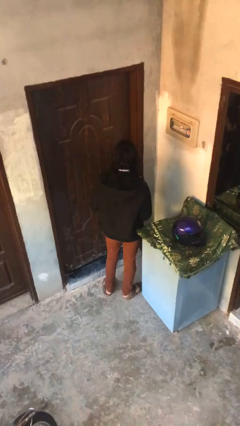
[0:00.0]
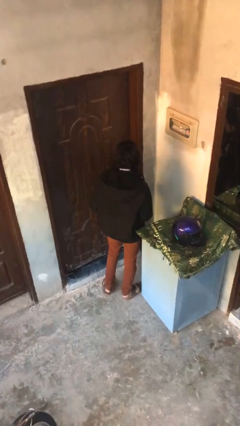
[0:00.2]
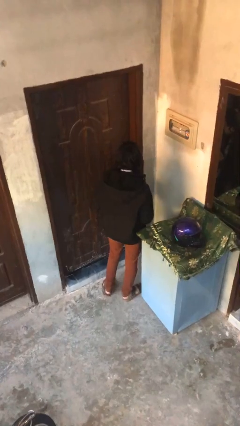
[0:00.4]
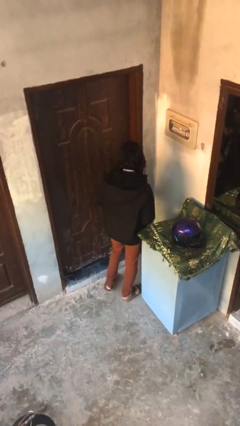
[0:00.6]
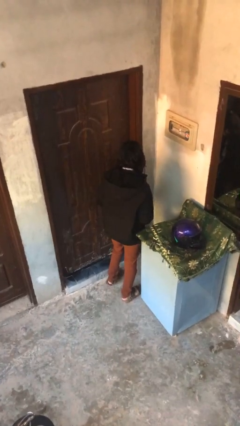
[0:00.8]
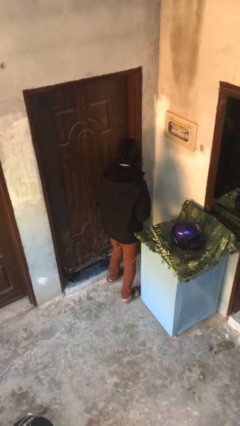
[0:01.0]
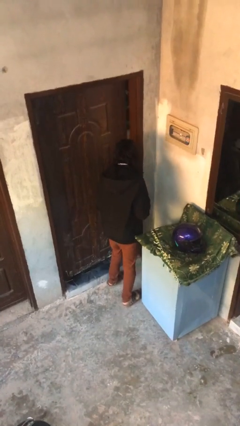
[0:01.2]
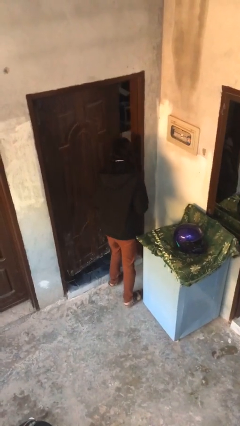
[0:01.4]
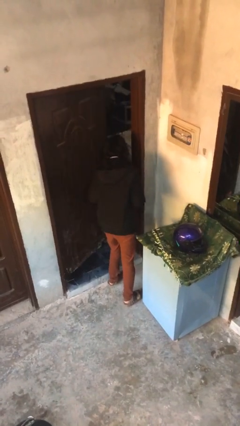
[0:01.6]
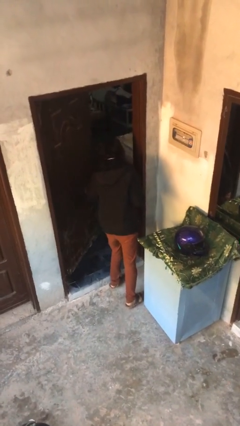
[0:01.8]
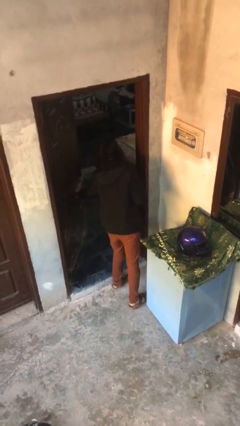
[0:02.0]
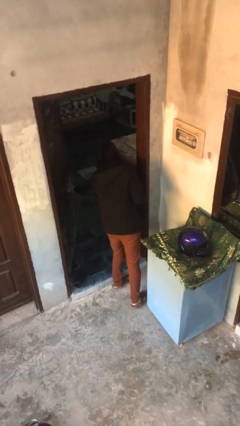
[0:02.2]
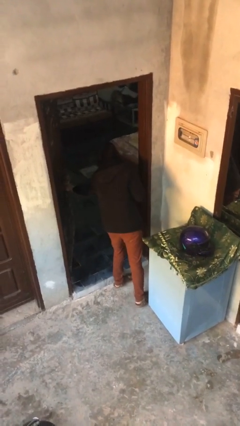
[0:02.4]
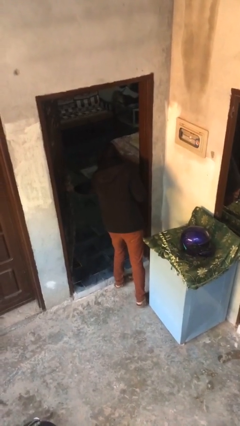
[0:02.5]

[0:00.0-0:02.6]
person opens facility door

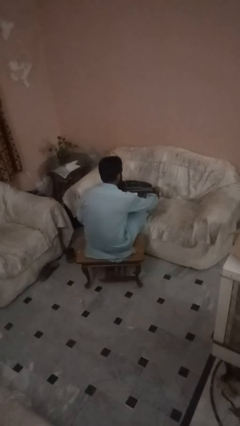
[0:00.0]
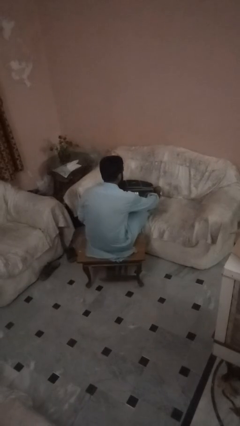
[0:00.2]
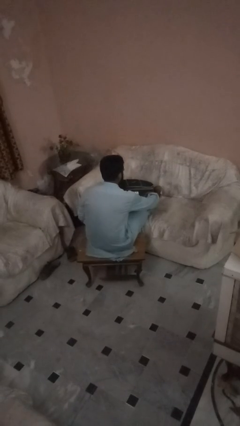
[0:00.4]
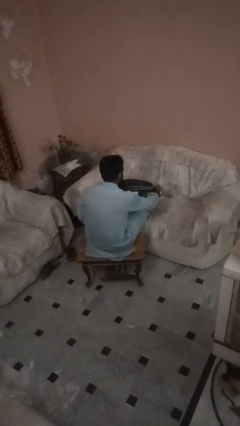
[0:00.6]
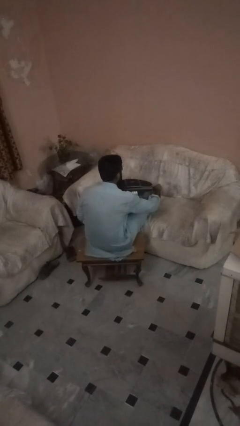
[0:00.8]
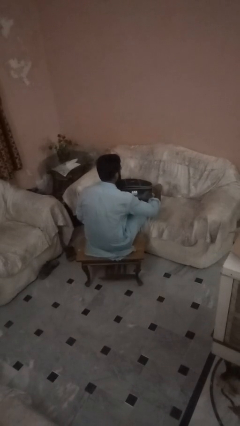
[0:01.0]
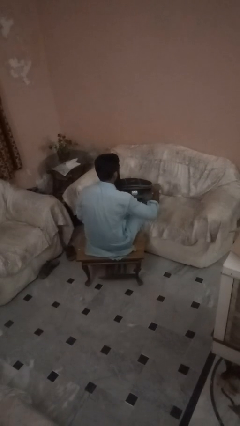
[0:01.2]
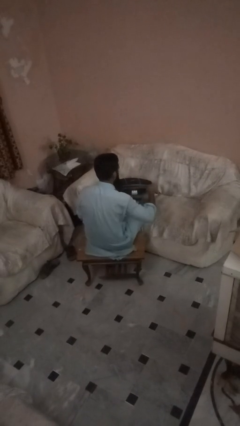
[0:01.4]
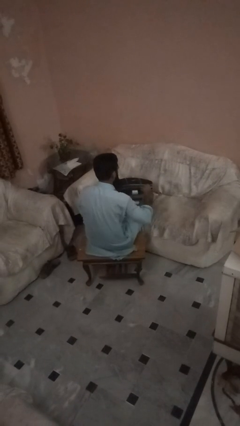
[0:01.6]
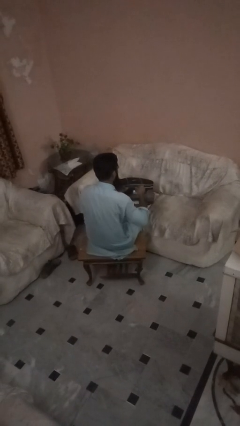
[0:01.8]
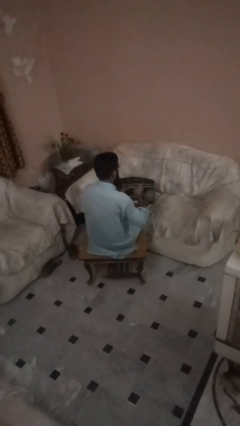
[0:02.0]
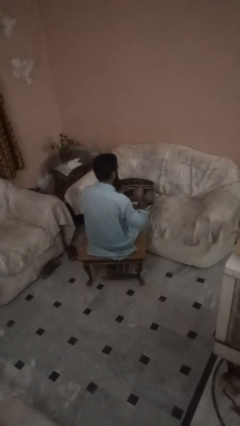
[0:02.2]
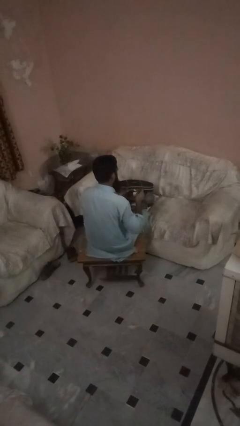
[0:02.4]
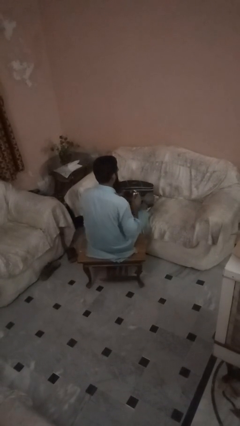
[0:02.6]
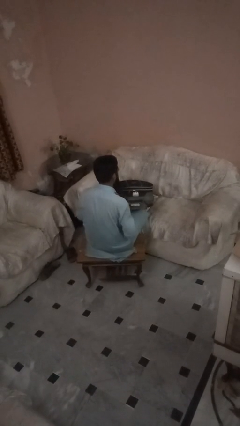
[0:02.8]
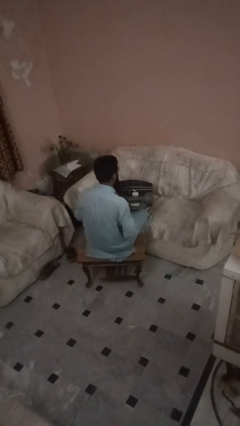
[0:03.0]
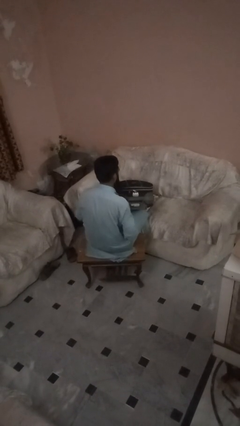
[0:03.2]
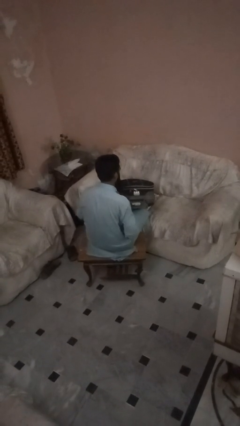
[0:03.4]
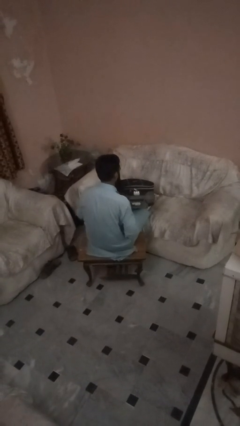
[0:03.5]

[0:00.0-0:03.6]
person closes suitcase

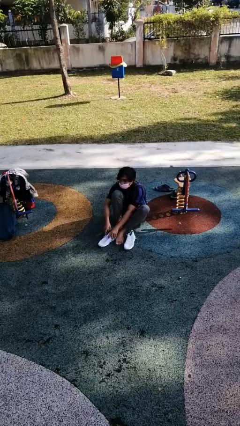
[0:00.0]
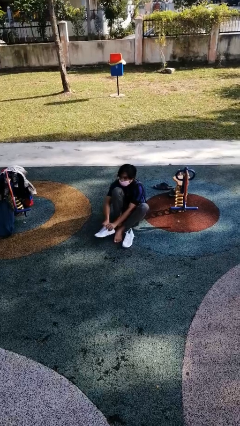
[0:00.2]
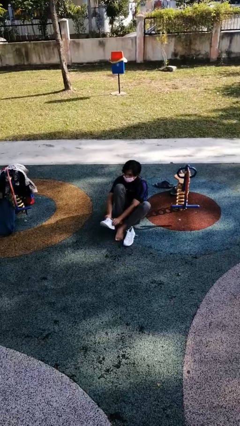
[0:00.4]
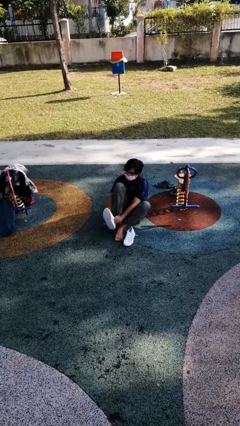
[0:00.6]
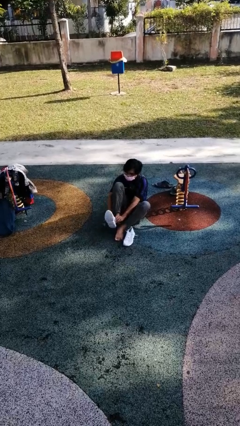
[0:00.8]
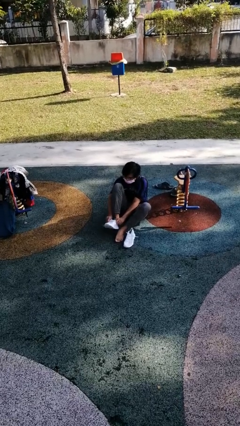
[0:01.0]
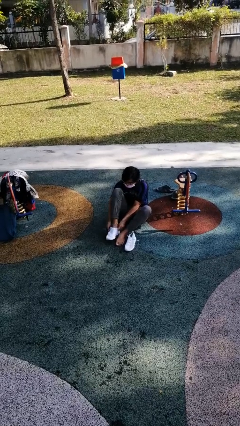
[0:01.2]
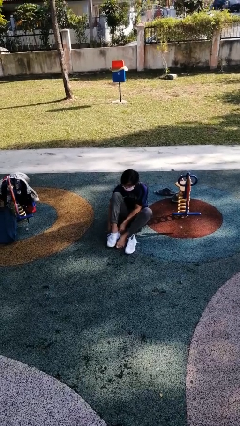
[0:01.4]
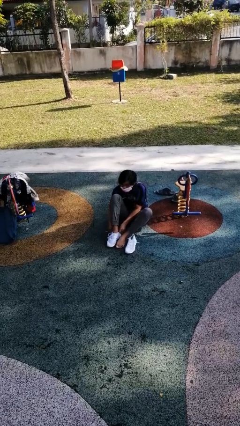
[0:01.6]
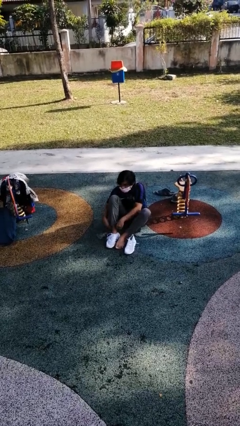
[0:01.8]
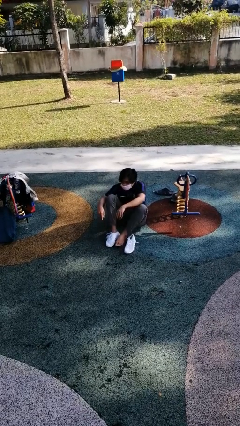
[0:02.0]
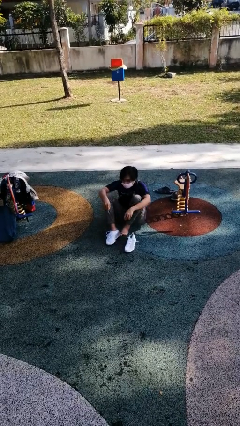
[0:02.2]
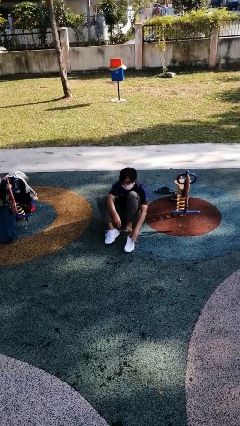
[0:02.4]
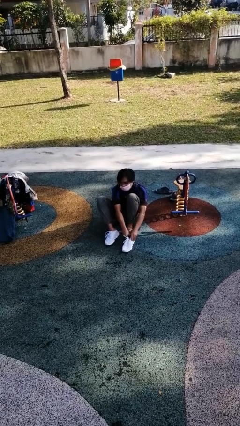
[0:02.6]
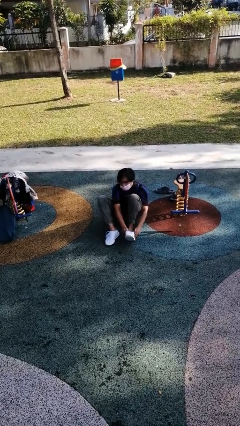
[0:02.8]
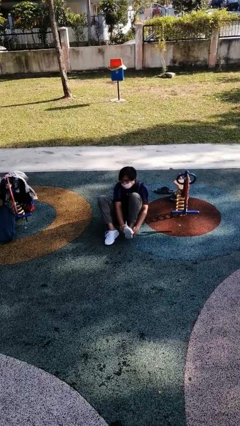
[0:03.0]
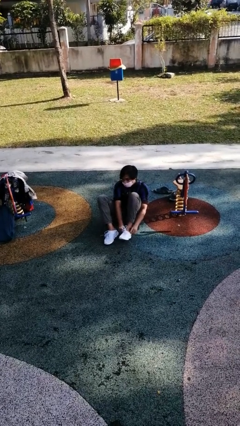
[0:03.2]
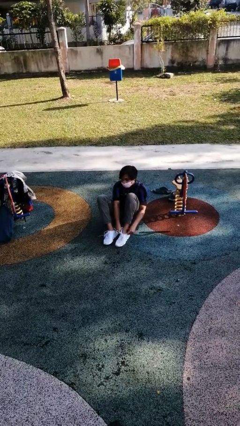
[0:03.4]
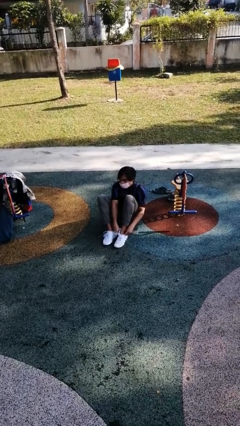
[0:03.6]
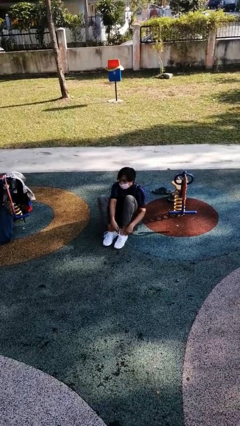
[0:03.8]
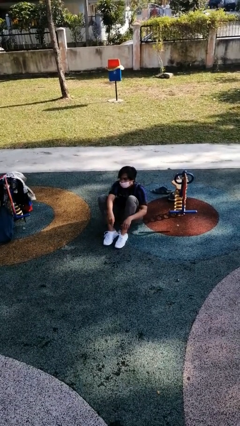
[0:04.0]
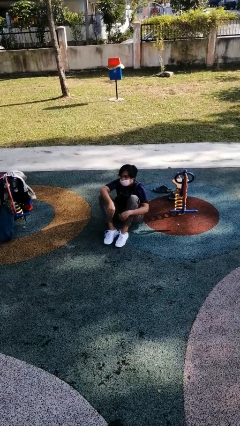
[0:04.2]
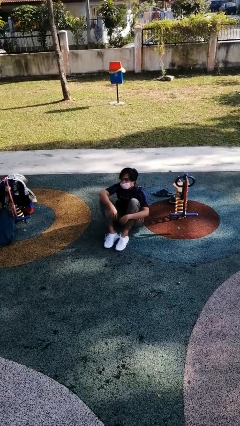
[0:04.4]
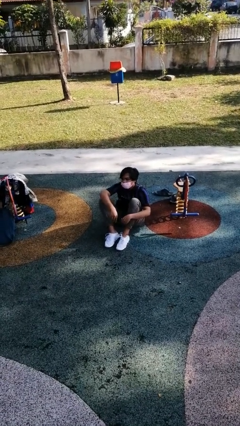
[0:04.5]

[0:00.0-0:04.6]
person puts on shoes

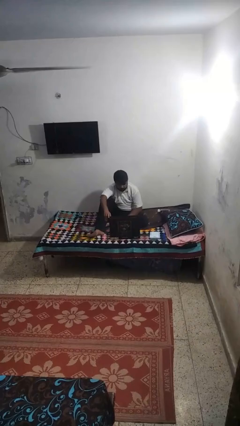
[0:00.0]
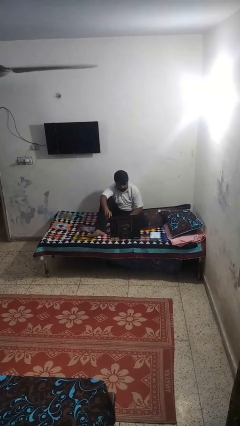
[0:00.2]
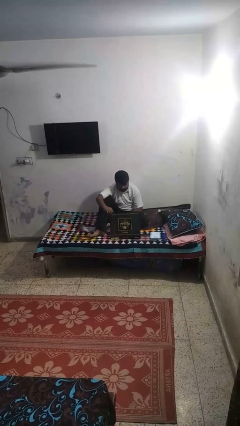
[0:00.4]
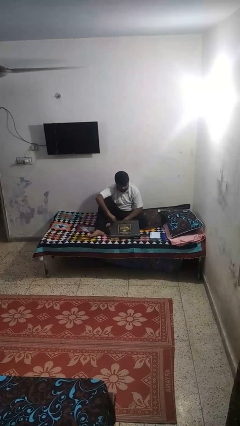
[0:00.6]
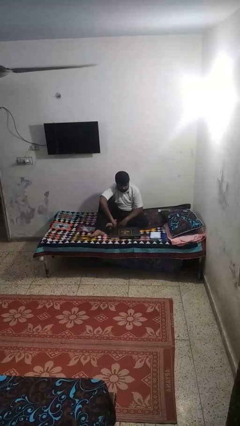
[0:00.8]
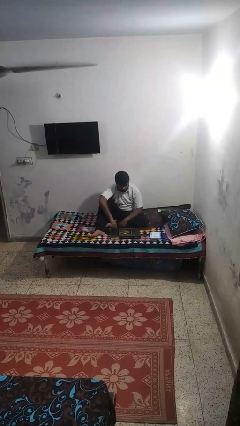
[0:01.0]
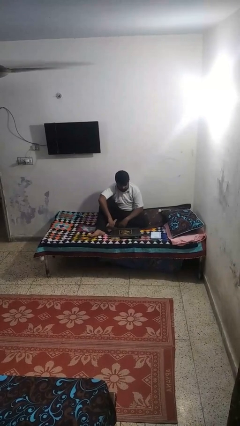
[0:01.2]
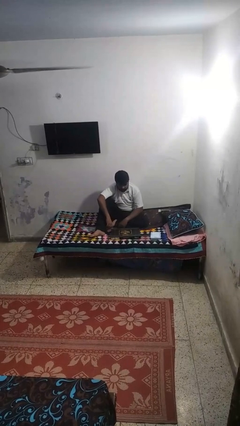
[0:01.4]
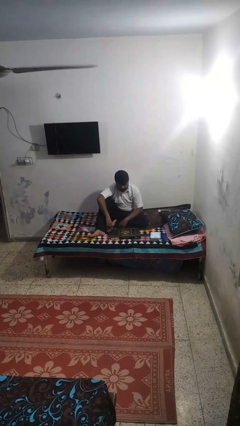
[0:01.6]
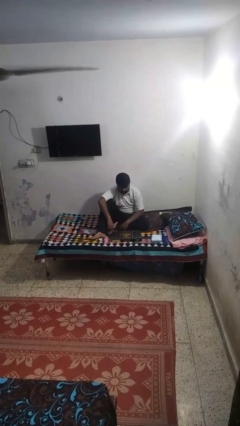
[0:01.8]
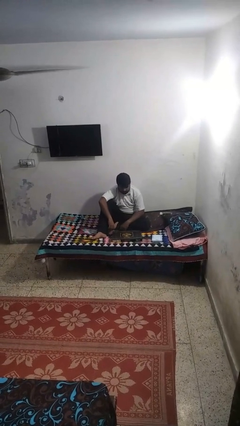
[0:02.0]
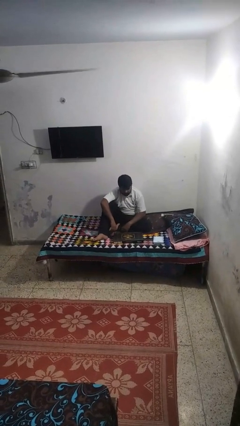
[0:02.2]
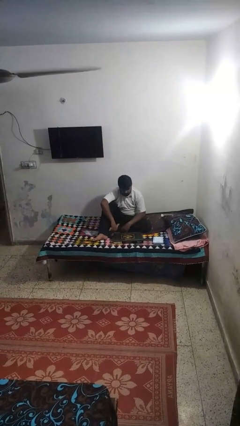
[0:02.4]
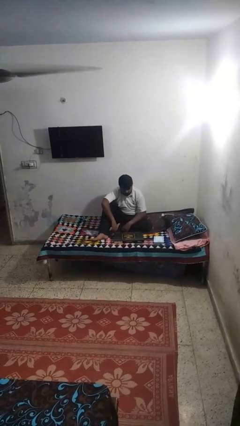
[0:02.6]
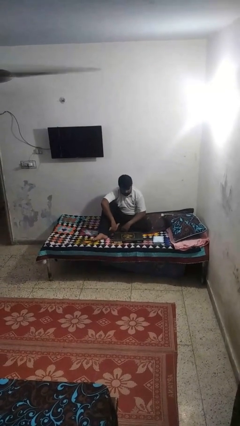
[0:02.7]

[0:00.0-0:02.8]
person closes laptop

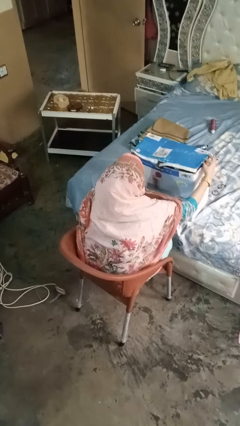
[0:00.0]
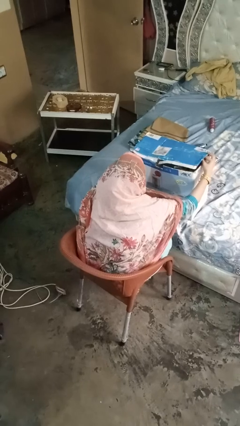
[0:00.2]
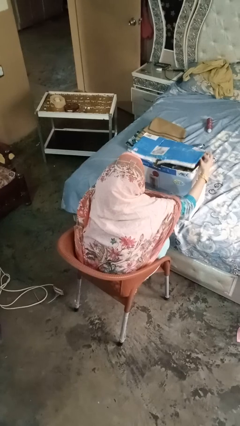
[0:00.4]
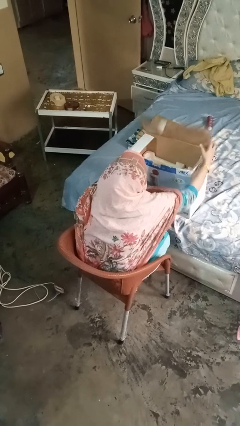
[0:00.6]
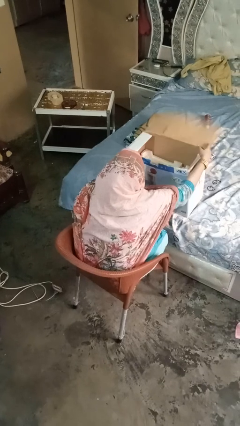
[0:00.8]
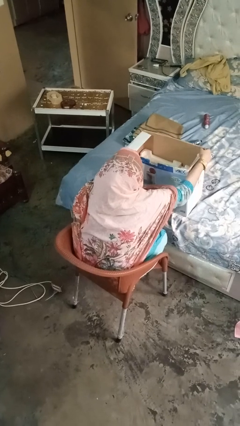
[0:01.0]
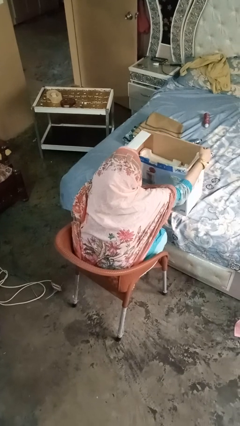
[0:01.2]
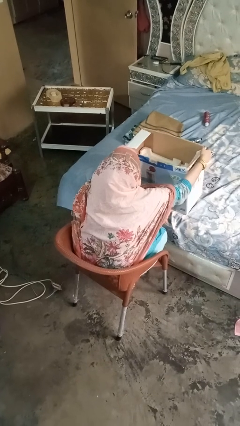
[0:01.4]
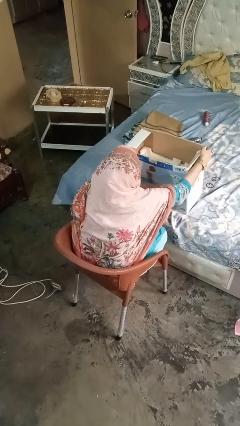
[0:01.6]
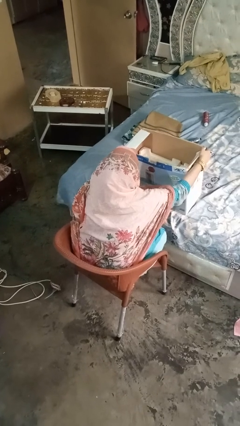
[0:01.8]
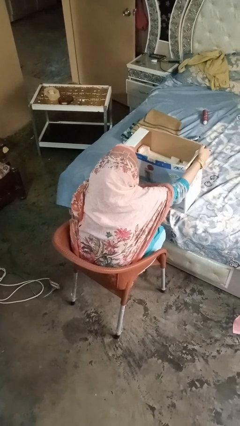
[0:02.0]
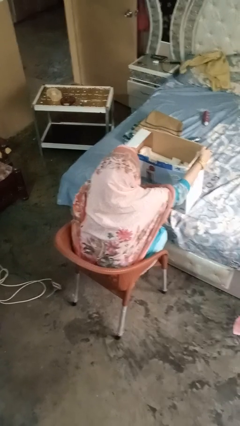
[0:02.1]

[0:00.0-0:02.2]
person opens box

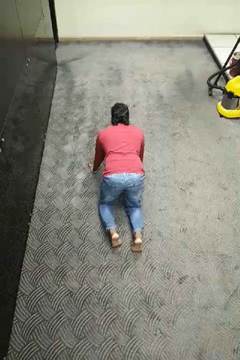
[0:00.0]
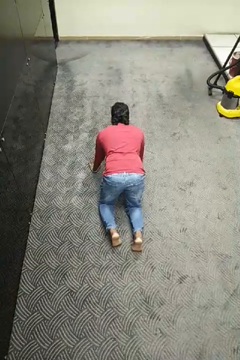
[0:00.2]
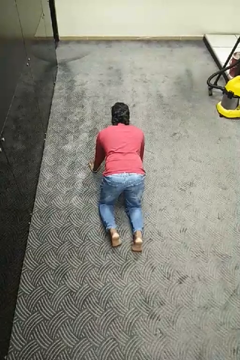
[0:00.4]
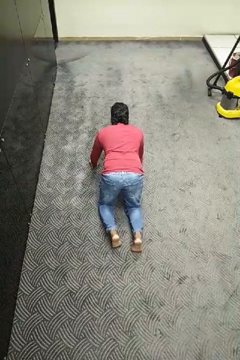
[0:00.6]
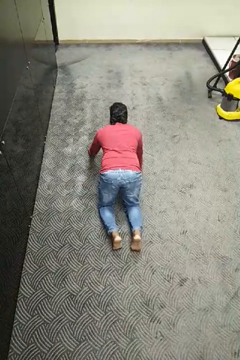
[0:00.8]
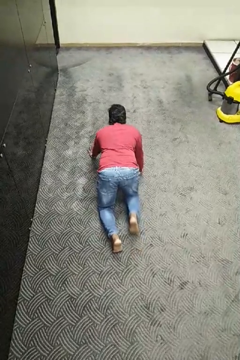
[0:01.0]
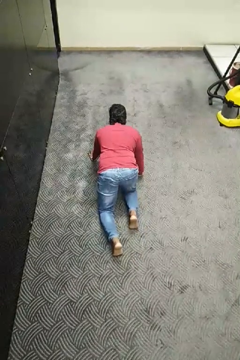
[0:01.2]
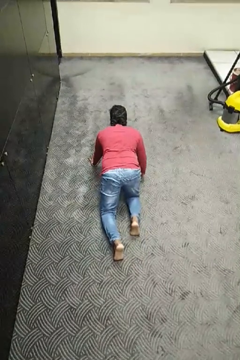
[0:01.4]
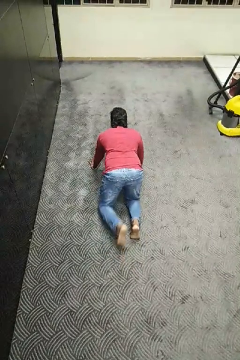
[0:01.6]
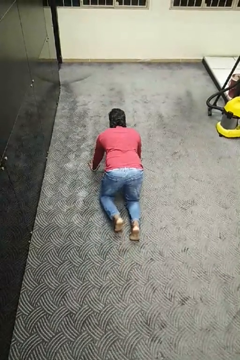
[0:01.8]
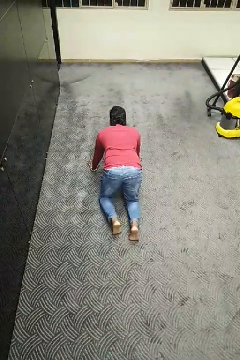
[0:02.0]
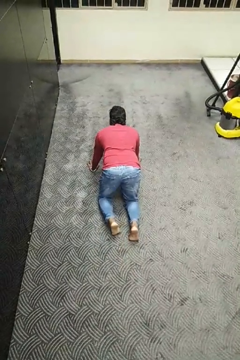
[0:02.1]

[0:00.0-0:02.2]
person crawls
